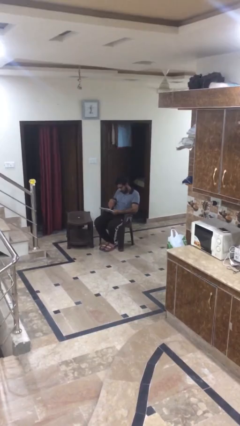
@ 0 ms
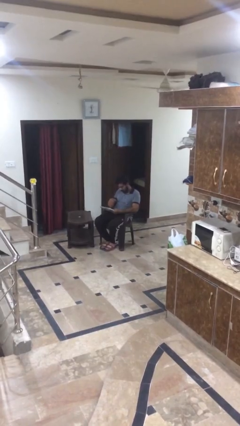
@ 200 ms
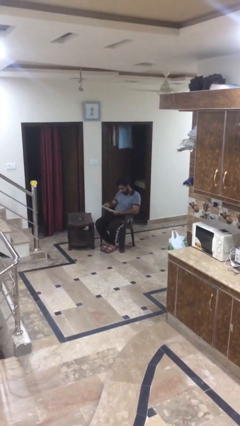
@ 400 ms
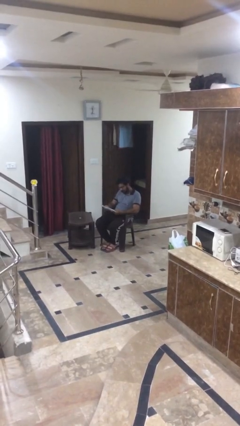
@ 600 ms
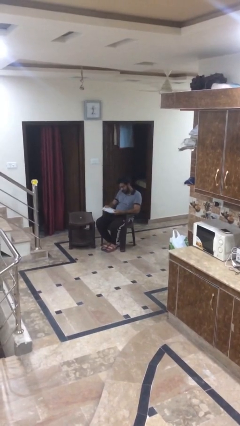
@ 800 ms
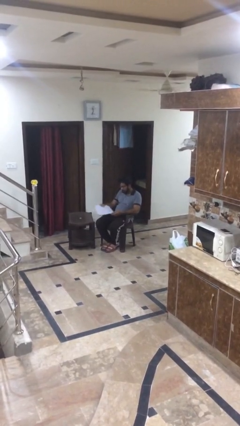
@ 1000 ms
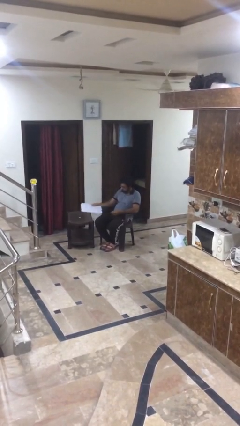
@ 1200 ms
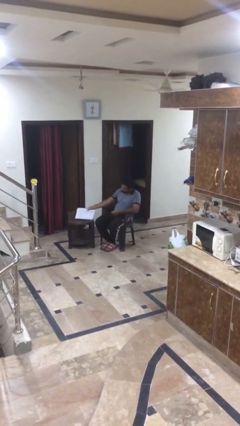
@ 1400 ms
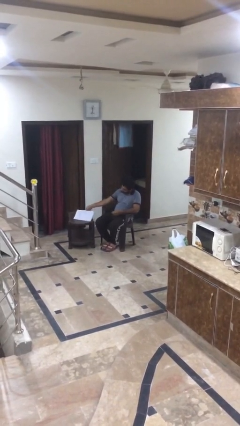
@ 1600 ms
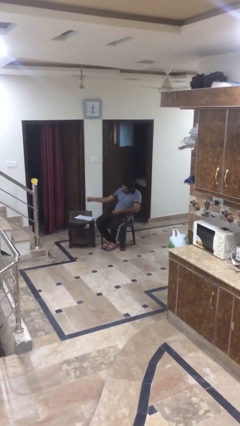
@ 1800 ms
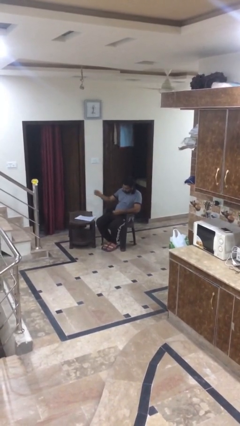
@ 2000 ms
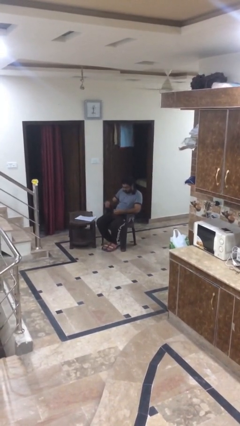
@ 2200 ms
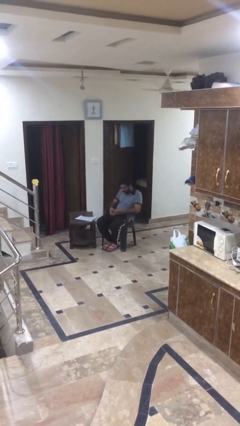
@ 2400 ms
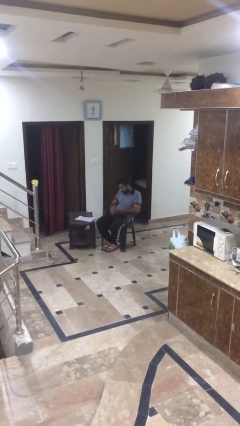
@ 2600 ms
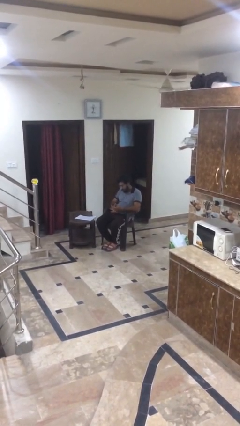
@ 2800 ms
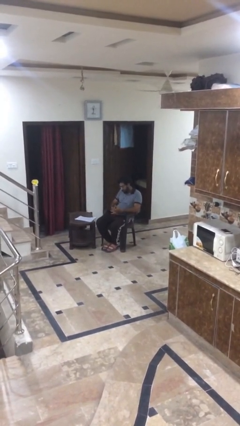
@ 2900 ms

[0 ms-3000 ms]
person puts down object on table

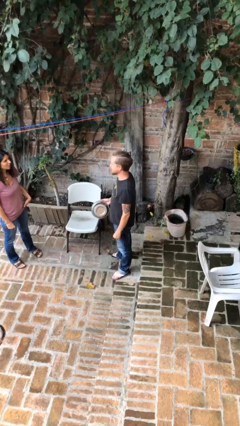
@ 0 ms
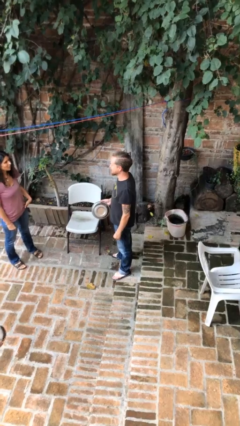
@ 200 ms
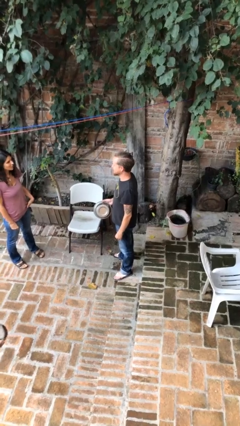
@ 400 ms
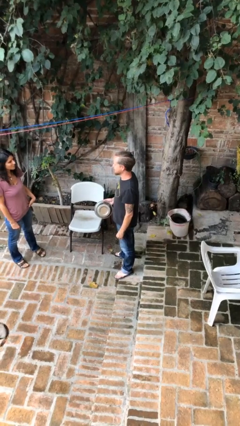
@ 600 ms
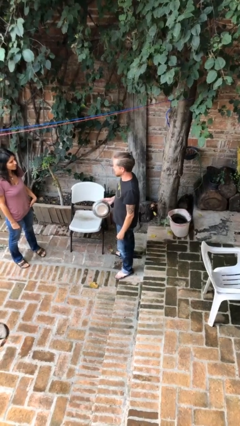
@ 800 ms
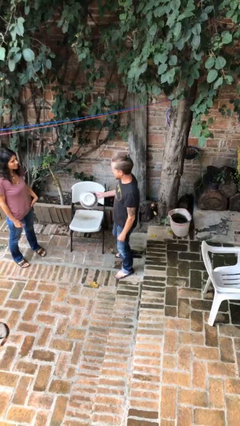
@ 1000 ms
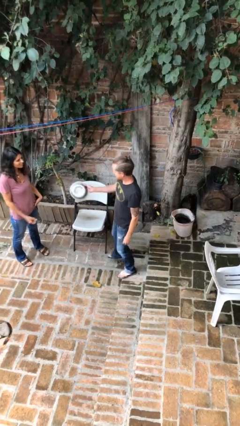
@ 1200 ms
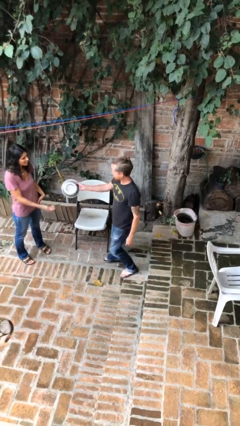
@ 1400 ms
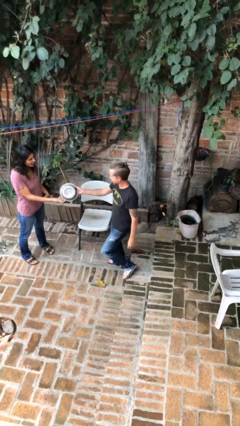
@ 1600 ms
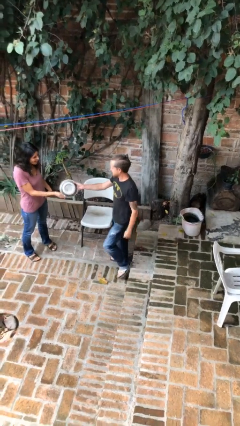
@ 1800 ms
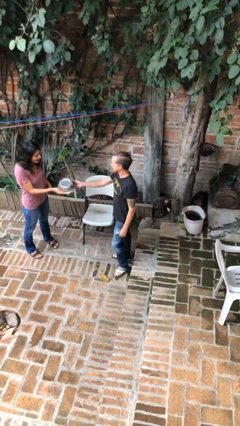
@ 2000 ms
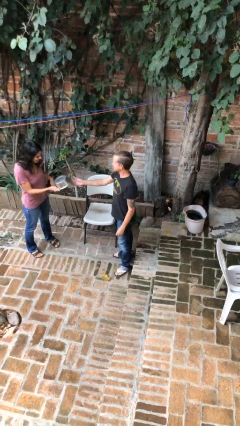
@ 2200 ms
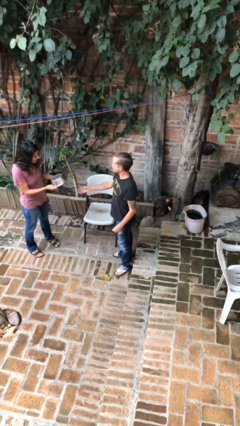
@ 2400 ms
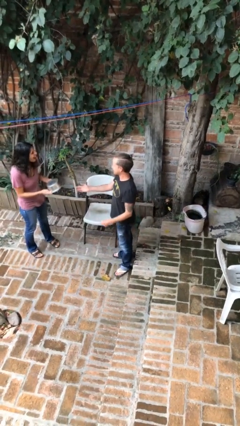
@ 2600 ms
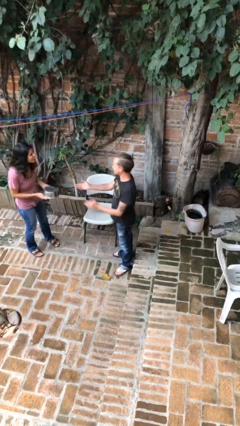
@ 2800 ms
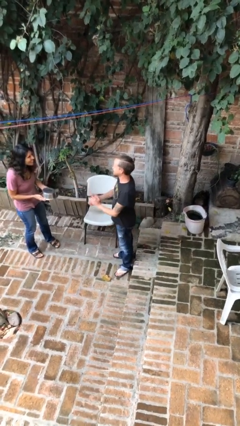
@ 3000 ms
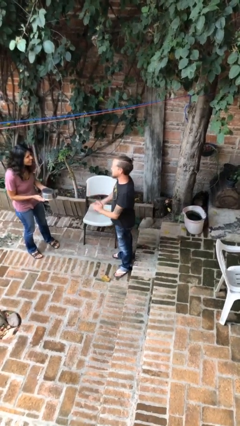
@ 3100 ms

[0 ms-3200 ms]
person transfers object to person

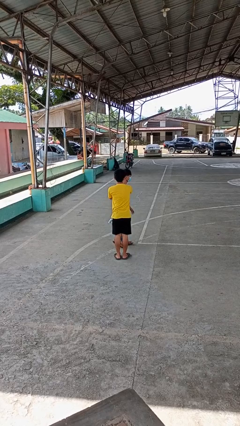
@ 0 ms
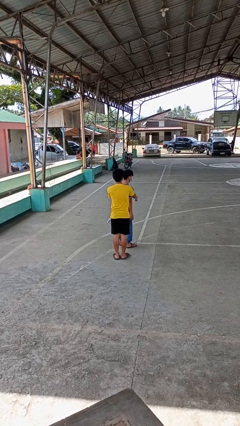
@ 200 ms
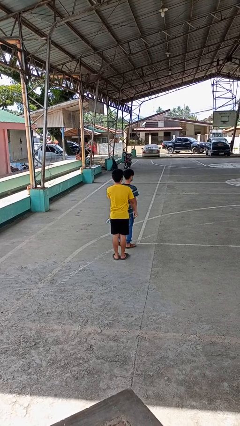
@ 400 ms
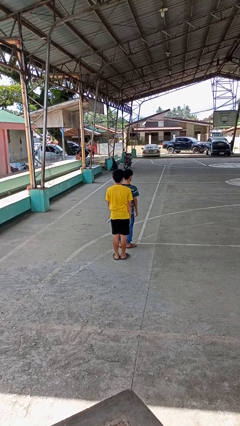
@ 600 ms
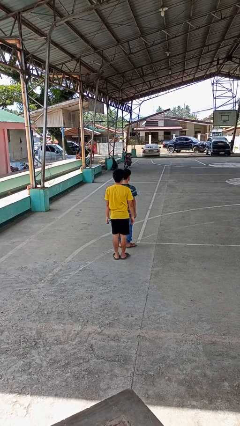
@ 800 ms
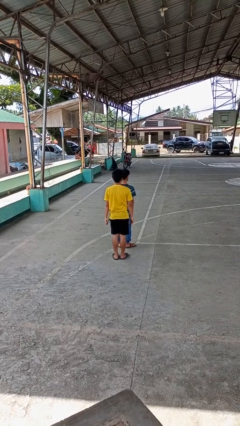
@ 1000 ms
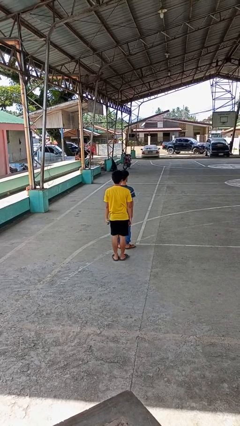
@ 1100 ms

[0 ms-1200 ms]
person spins person around

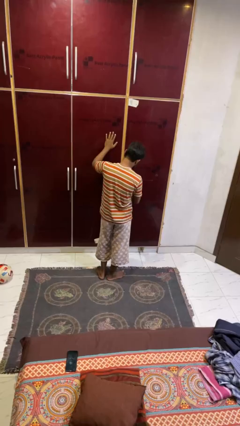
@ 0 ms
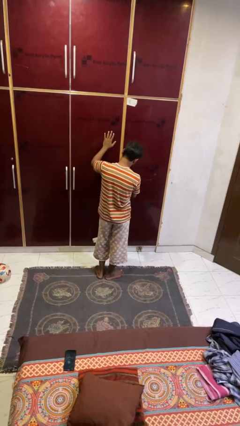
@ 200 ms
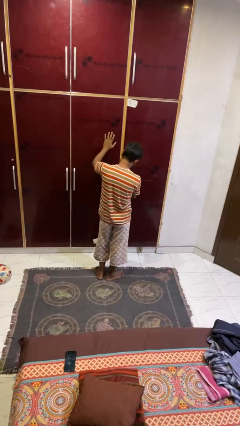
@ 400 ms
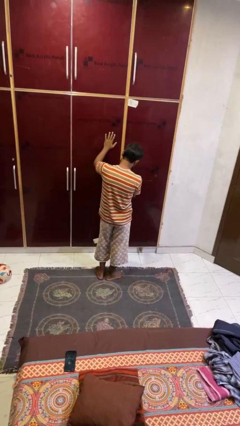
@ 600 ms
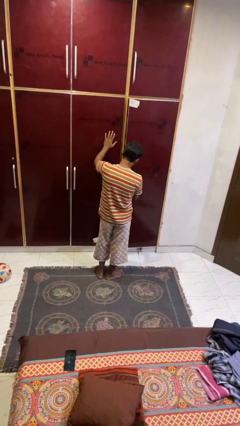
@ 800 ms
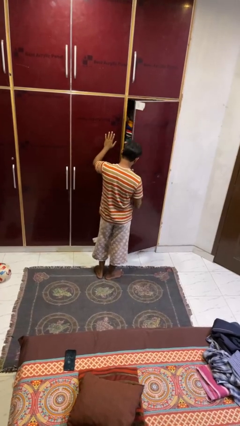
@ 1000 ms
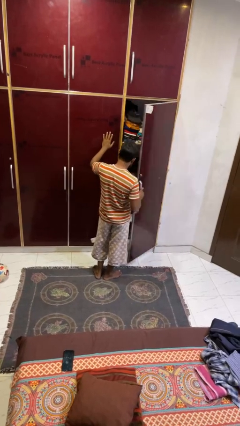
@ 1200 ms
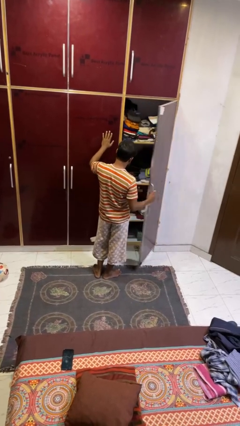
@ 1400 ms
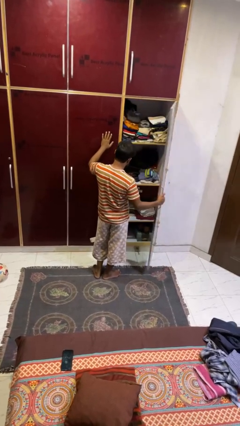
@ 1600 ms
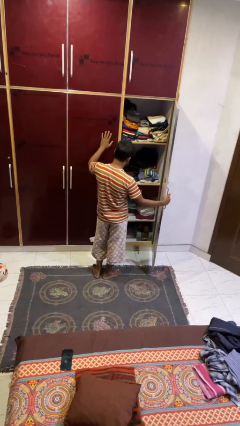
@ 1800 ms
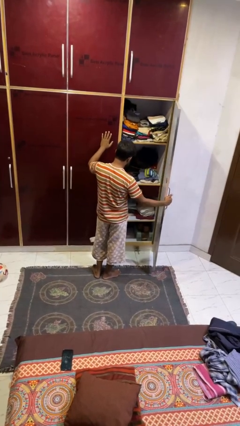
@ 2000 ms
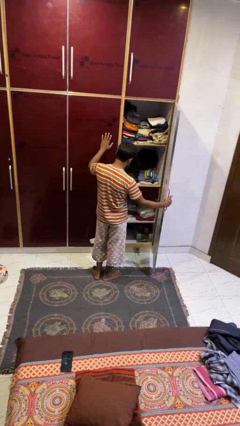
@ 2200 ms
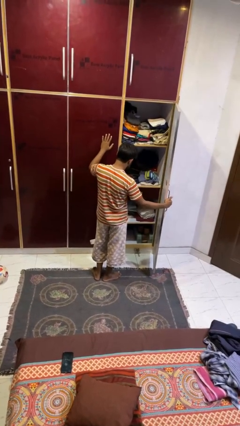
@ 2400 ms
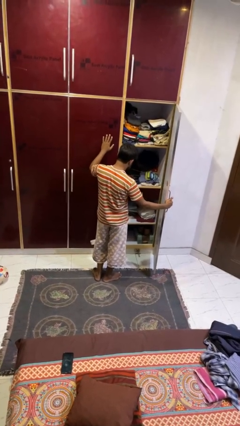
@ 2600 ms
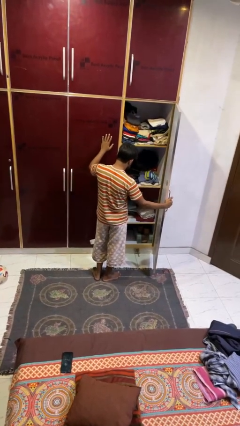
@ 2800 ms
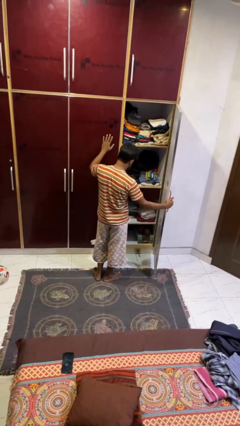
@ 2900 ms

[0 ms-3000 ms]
person opens closet door

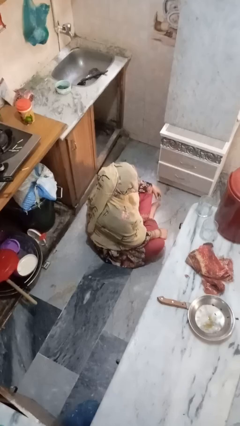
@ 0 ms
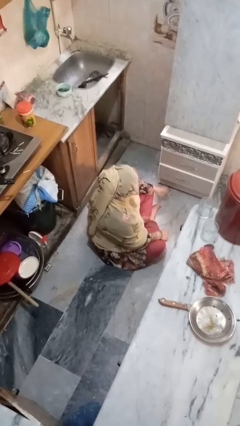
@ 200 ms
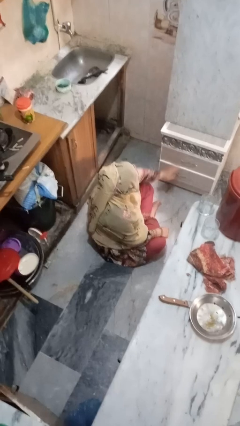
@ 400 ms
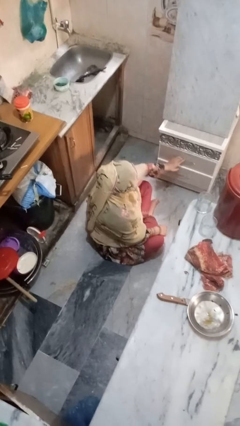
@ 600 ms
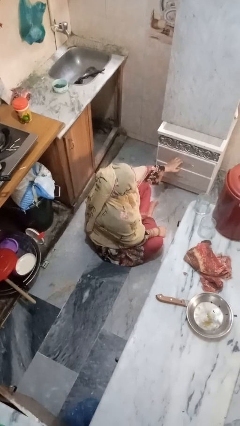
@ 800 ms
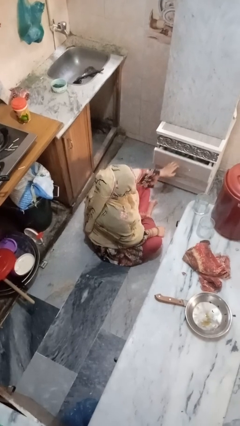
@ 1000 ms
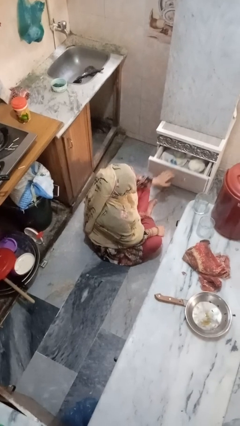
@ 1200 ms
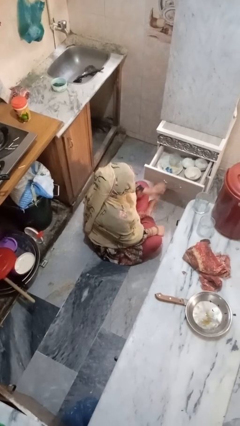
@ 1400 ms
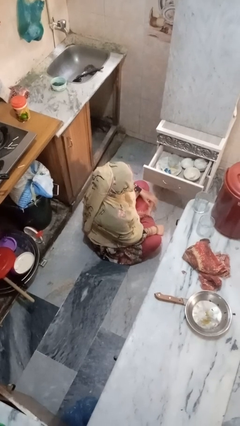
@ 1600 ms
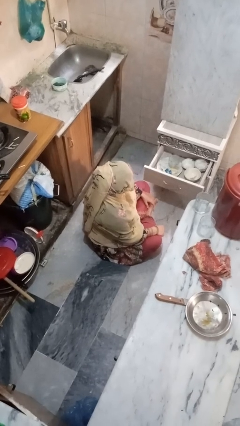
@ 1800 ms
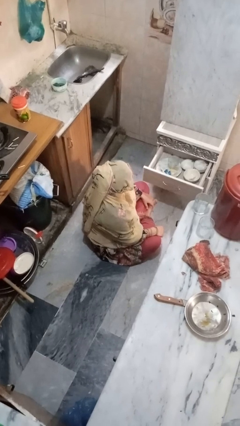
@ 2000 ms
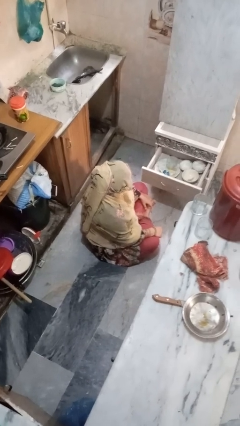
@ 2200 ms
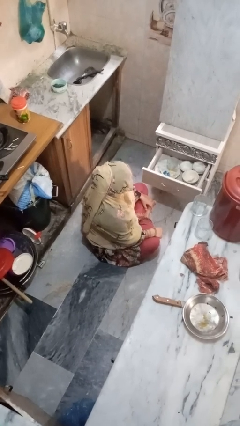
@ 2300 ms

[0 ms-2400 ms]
person opens kitchen drawer

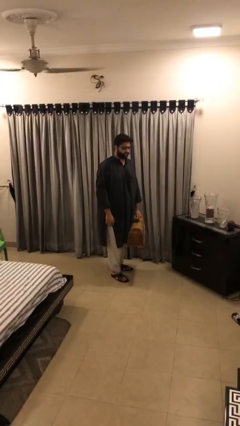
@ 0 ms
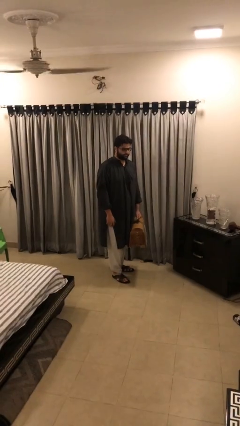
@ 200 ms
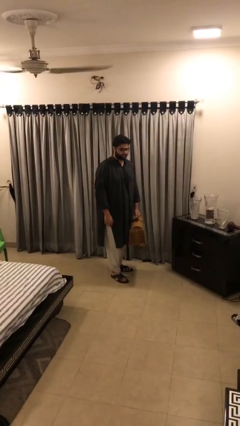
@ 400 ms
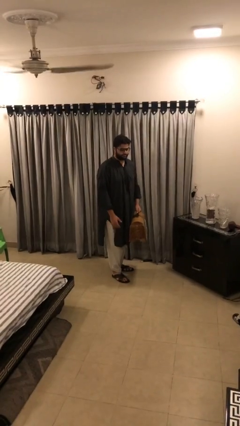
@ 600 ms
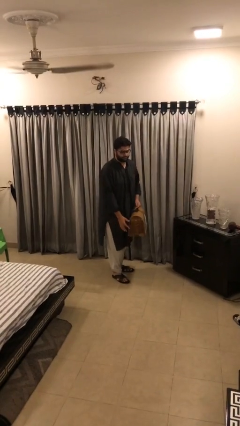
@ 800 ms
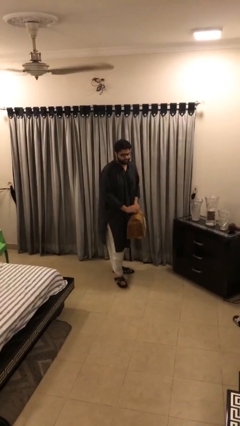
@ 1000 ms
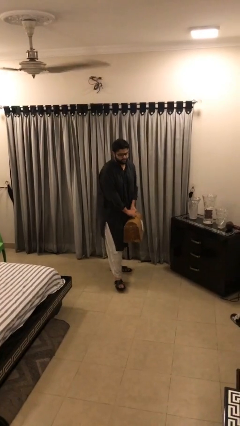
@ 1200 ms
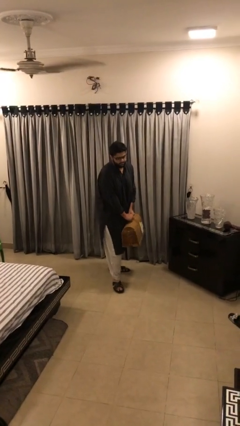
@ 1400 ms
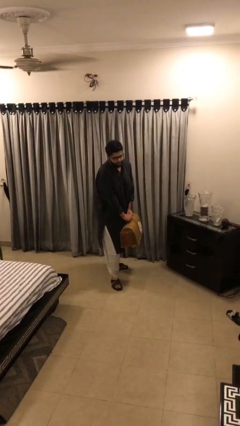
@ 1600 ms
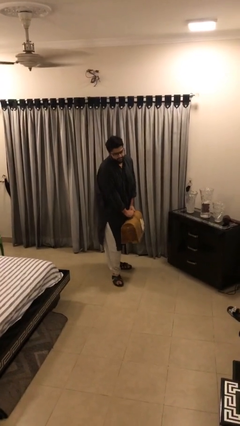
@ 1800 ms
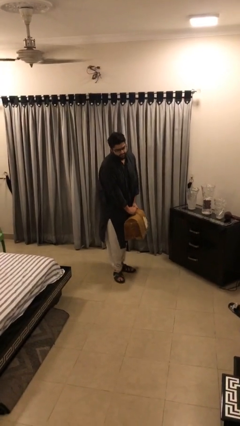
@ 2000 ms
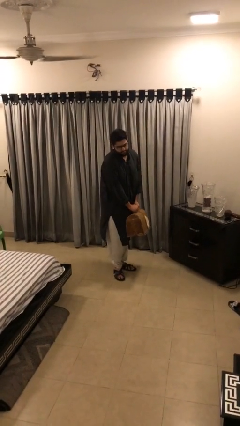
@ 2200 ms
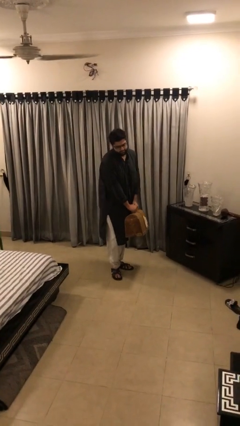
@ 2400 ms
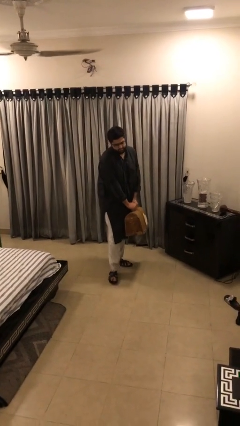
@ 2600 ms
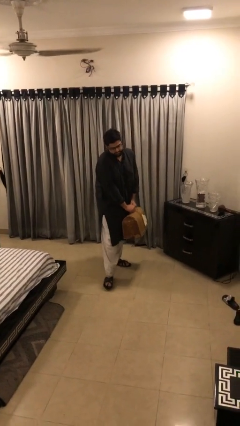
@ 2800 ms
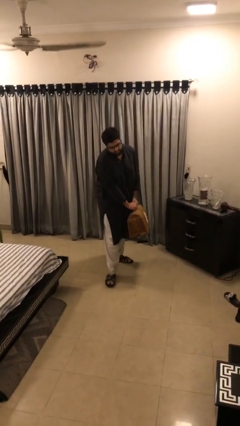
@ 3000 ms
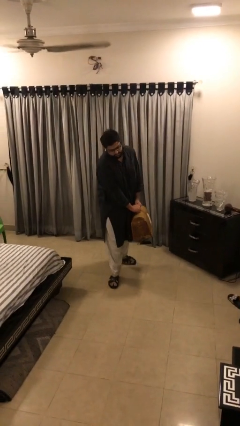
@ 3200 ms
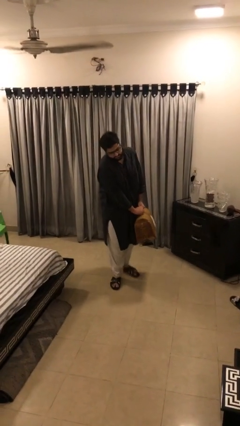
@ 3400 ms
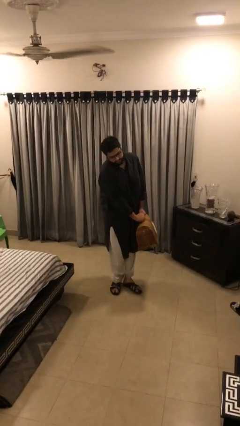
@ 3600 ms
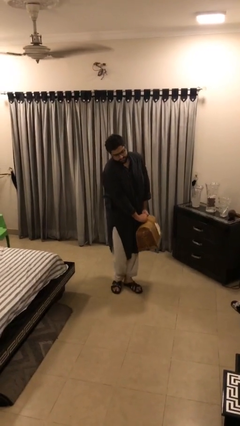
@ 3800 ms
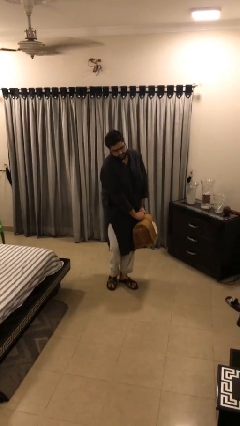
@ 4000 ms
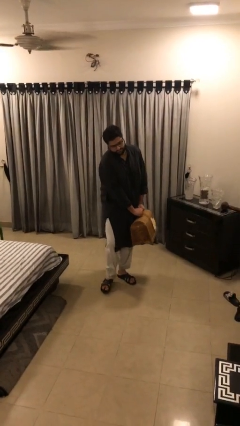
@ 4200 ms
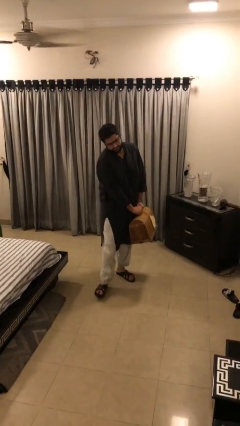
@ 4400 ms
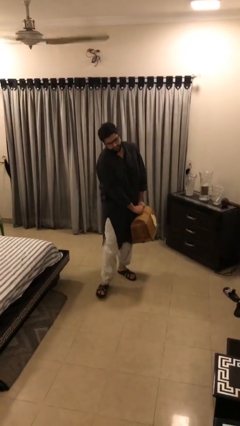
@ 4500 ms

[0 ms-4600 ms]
person carries heavy object
